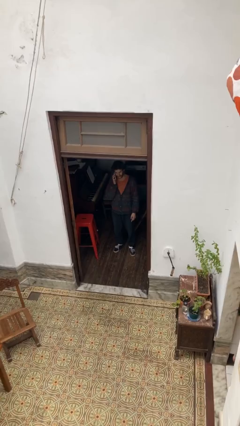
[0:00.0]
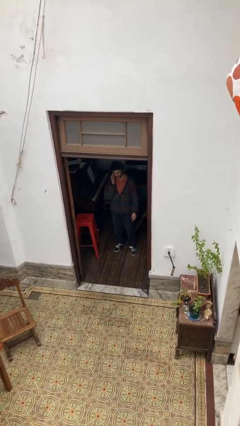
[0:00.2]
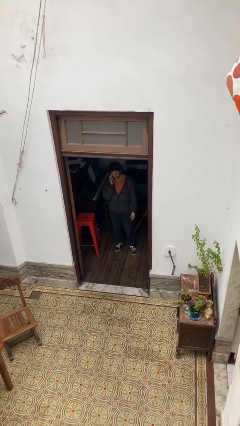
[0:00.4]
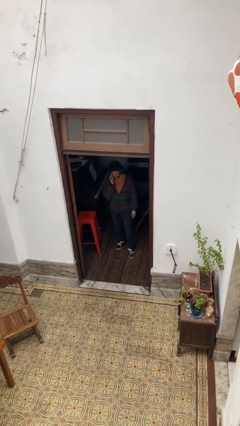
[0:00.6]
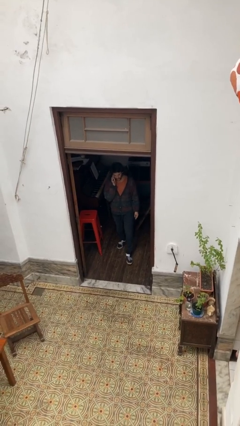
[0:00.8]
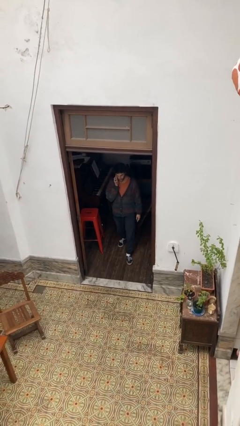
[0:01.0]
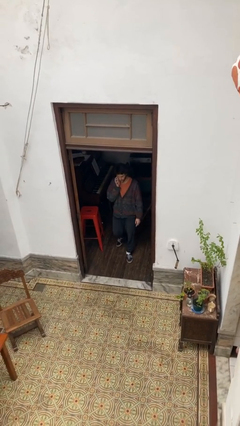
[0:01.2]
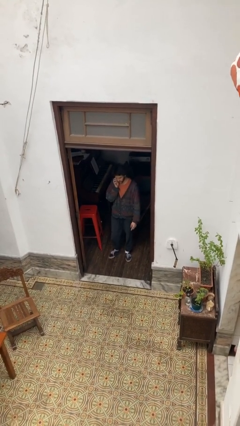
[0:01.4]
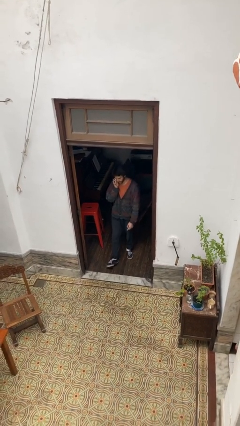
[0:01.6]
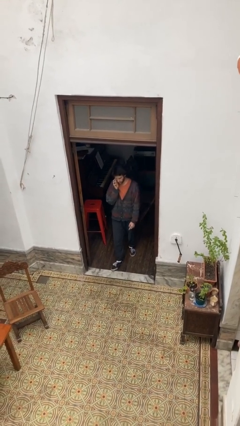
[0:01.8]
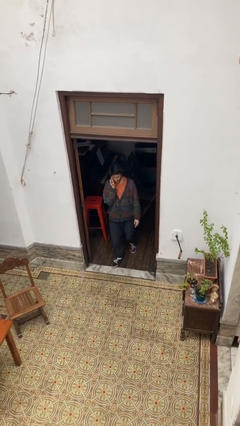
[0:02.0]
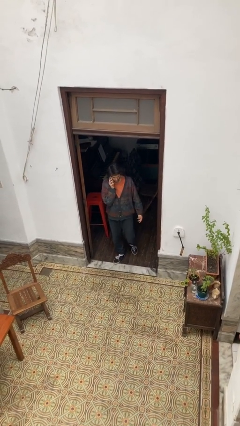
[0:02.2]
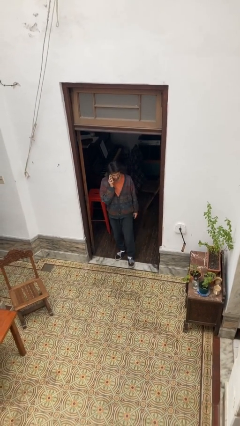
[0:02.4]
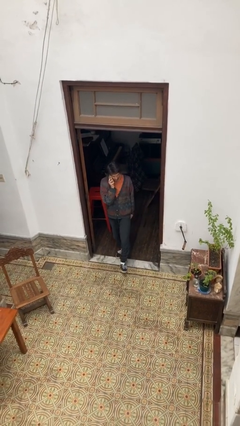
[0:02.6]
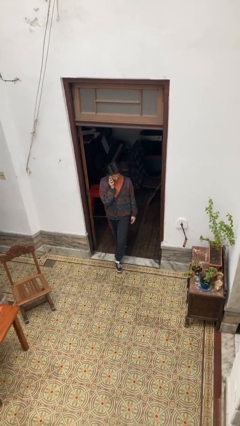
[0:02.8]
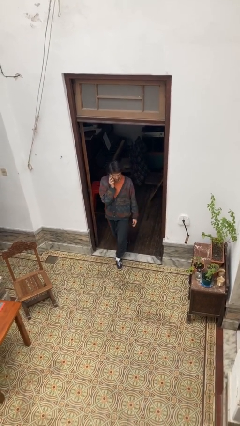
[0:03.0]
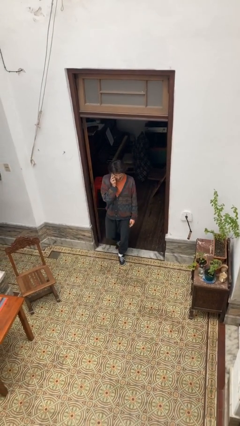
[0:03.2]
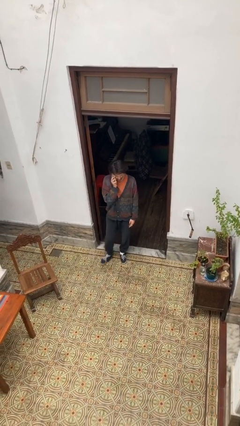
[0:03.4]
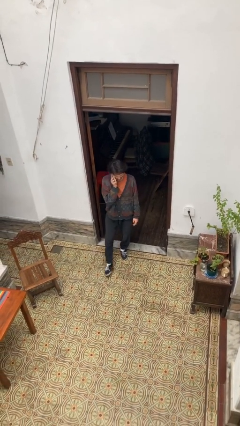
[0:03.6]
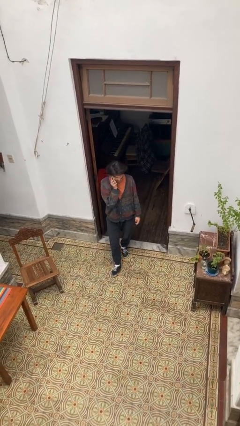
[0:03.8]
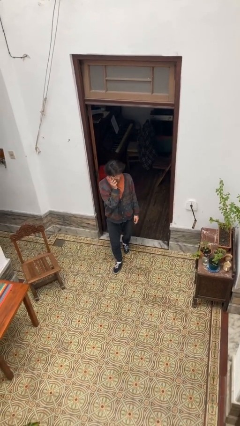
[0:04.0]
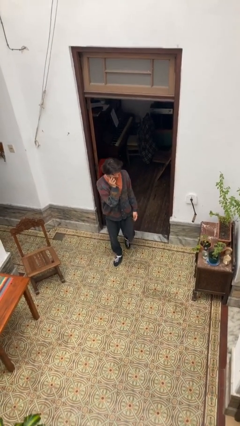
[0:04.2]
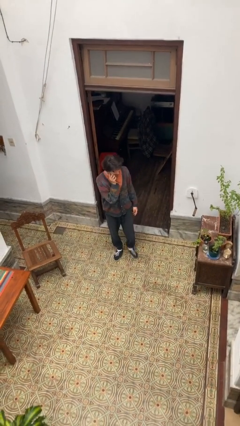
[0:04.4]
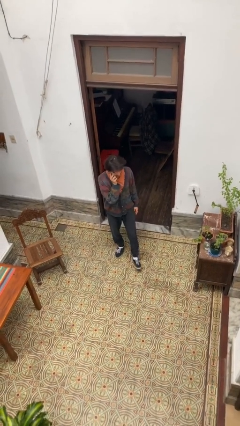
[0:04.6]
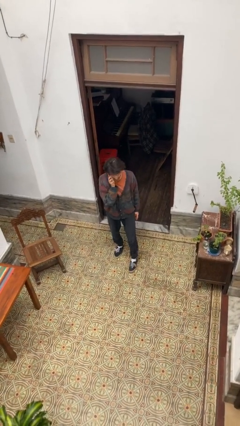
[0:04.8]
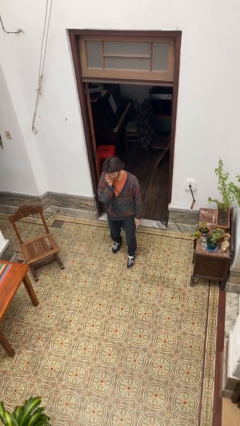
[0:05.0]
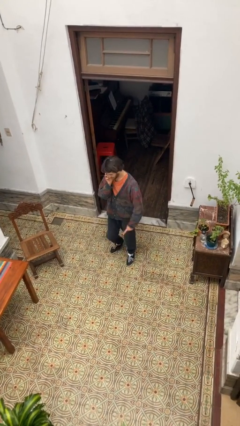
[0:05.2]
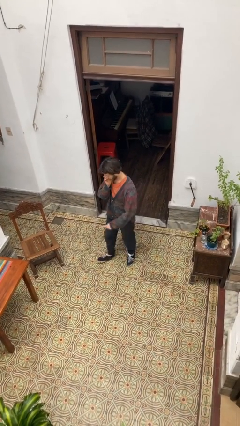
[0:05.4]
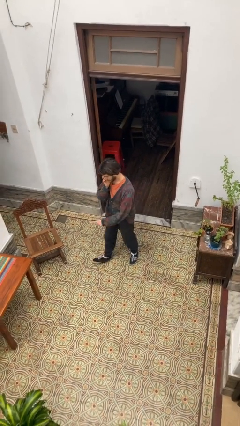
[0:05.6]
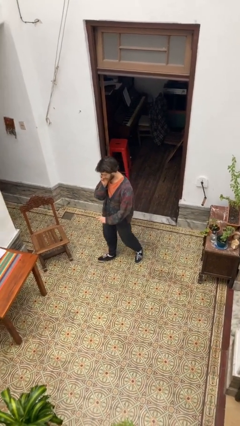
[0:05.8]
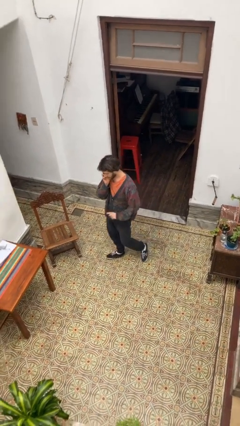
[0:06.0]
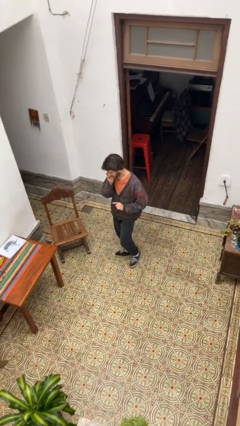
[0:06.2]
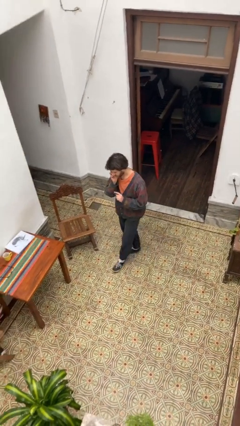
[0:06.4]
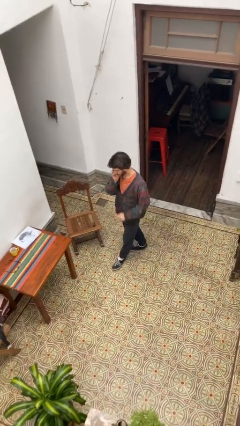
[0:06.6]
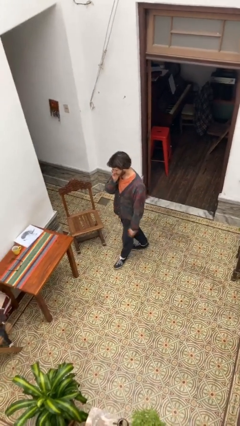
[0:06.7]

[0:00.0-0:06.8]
person enters scene through structure

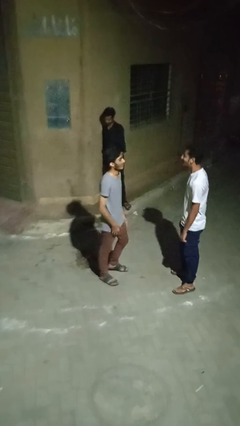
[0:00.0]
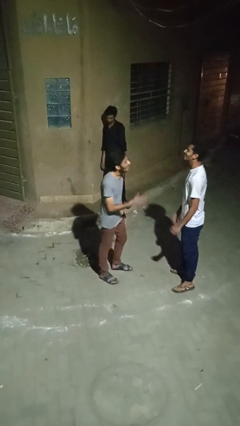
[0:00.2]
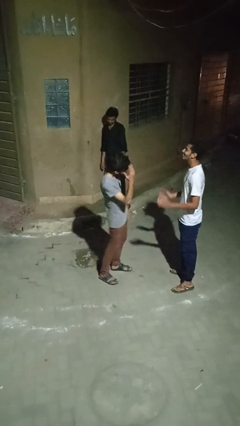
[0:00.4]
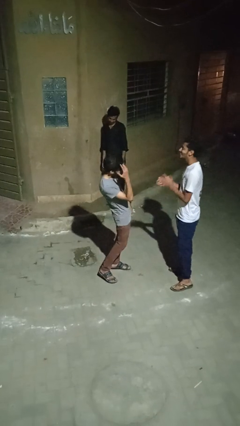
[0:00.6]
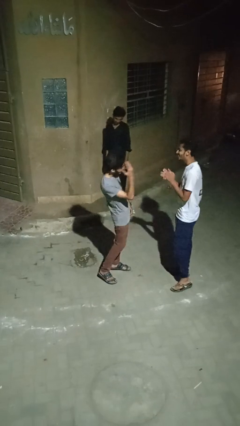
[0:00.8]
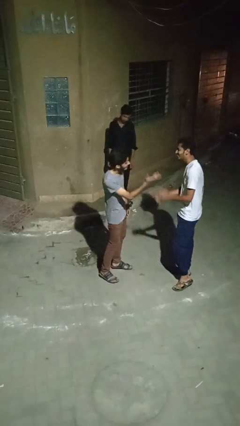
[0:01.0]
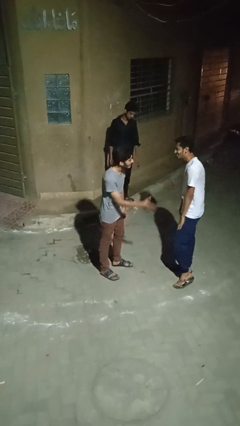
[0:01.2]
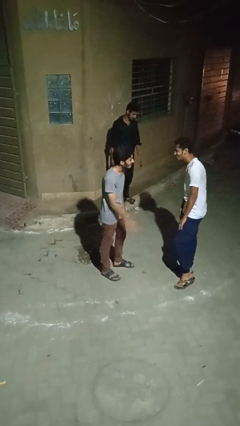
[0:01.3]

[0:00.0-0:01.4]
person laughs with person

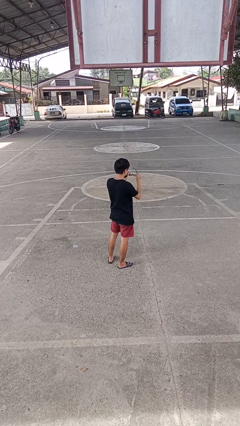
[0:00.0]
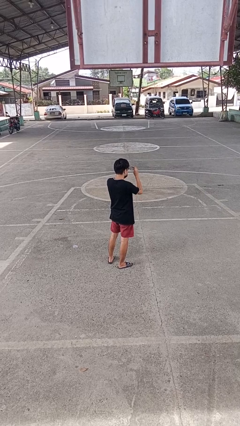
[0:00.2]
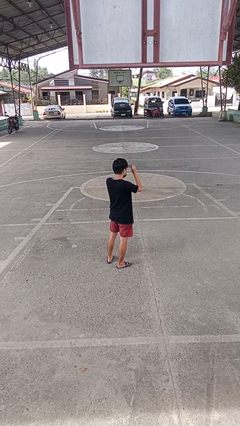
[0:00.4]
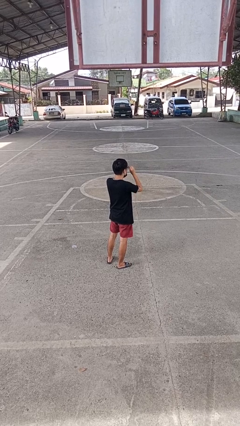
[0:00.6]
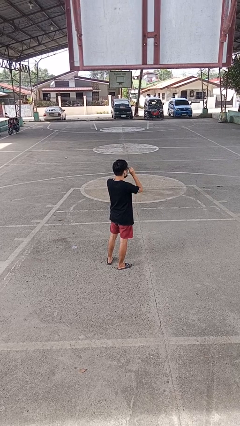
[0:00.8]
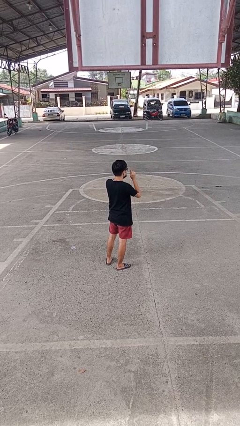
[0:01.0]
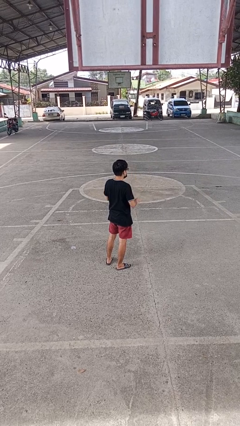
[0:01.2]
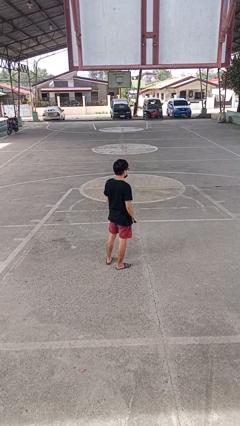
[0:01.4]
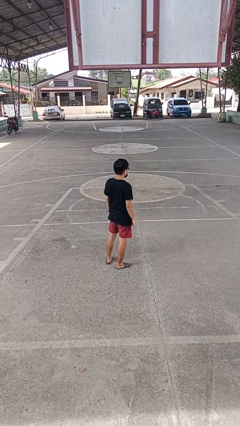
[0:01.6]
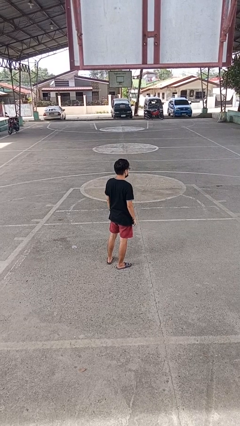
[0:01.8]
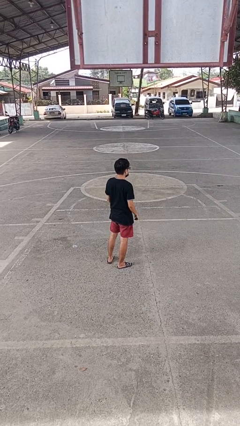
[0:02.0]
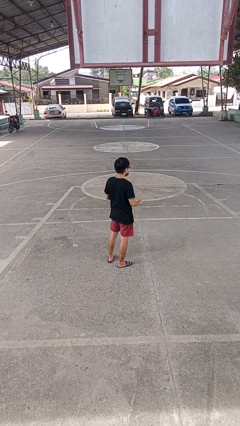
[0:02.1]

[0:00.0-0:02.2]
person puts on glasses

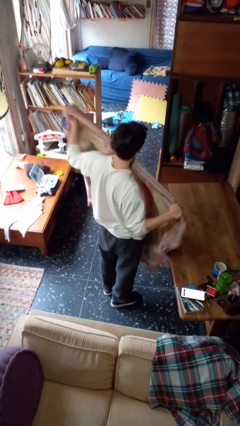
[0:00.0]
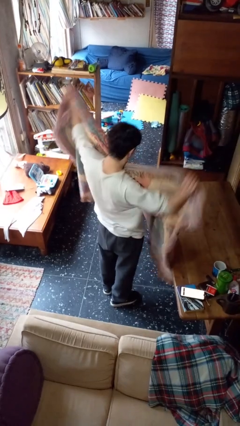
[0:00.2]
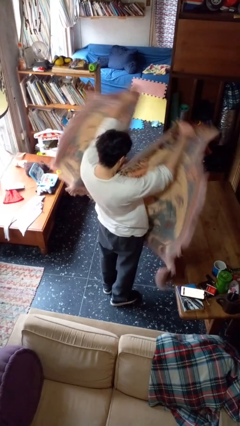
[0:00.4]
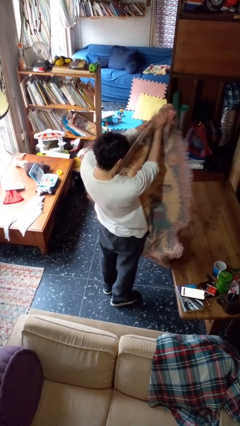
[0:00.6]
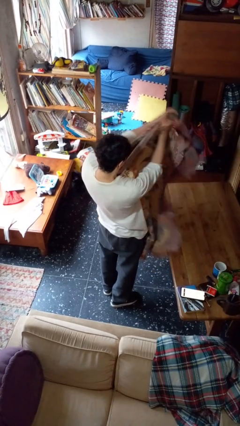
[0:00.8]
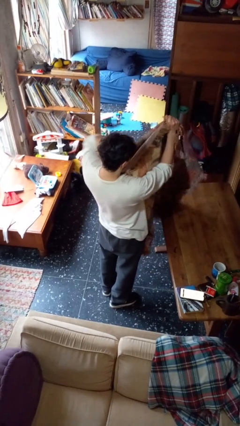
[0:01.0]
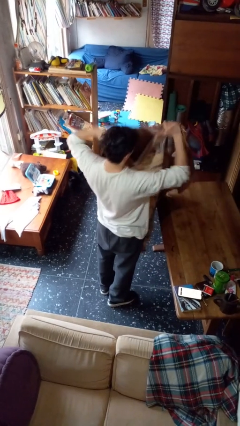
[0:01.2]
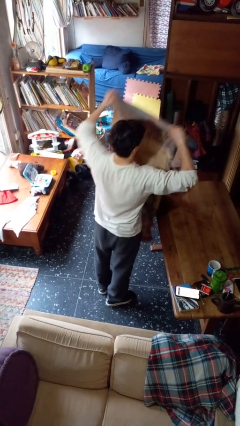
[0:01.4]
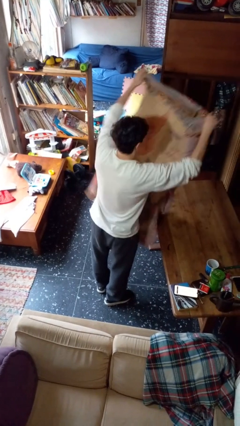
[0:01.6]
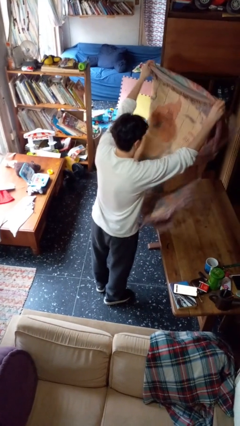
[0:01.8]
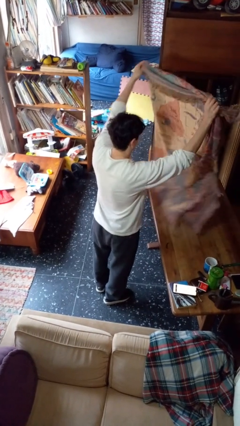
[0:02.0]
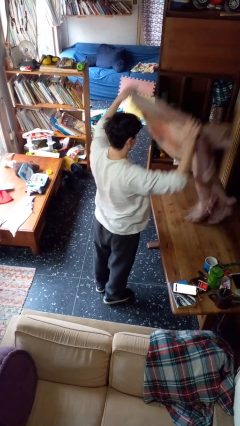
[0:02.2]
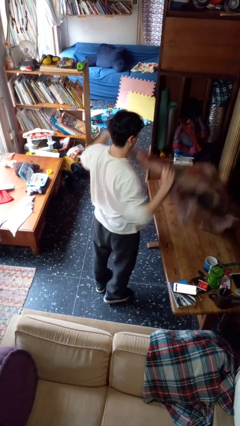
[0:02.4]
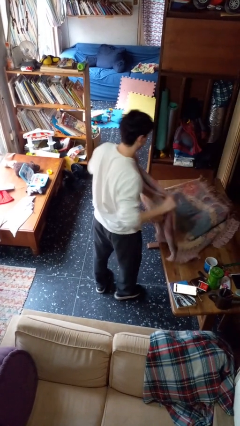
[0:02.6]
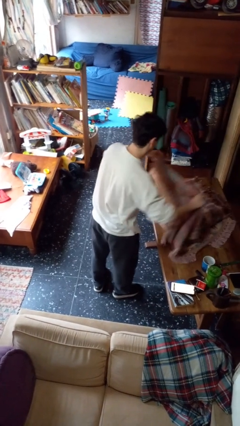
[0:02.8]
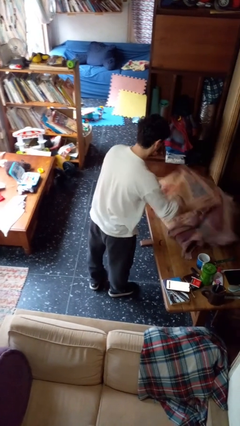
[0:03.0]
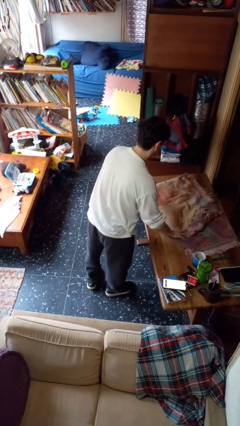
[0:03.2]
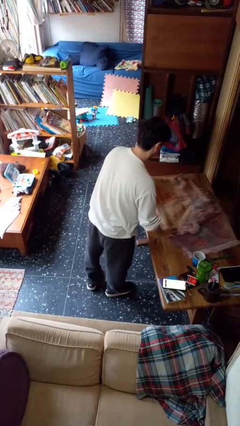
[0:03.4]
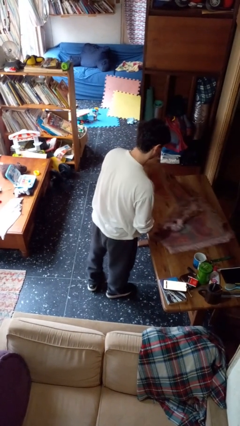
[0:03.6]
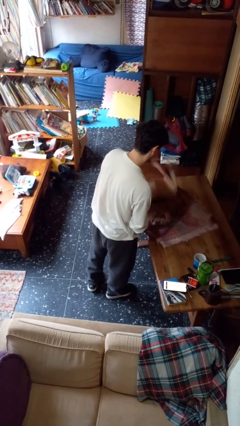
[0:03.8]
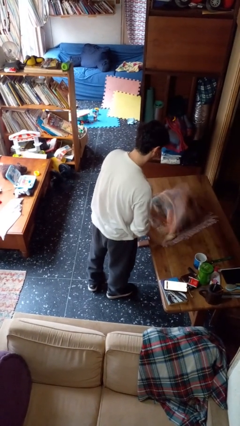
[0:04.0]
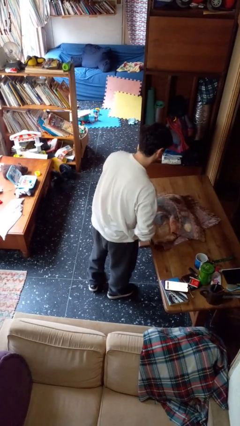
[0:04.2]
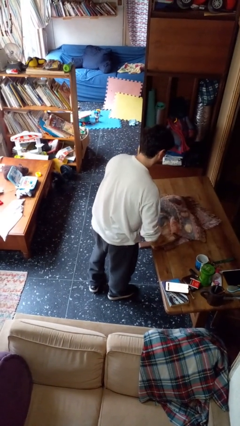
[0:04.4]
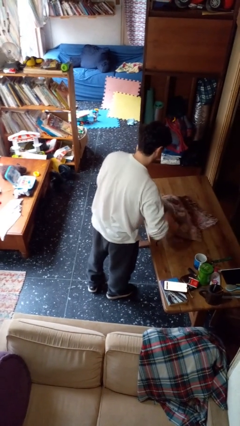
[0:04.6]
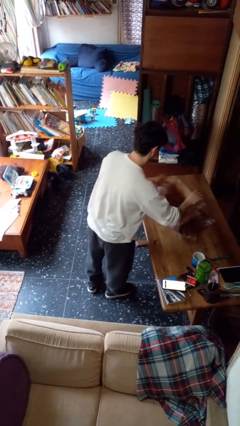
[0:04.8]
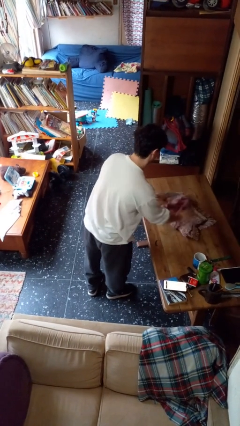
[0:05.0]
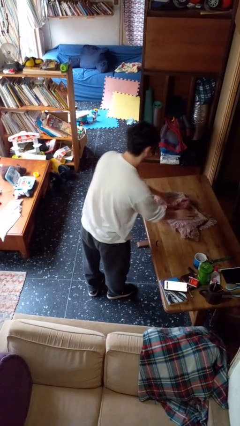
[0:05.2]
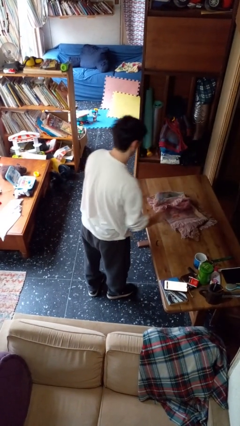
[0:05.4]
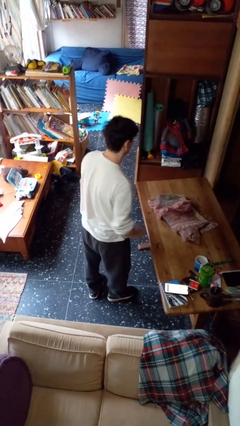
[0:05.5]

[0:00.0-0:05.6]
person folds blanket

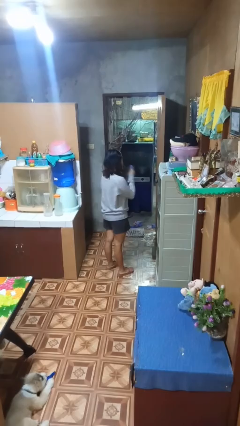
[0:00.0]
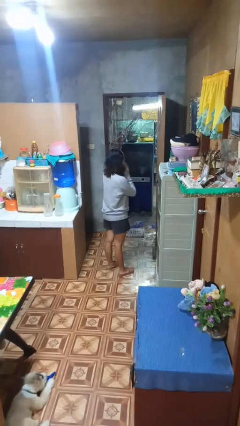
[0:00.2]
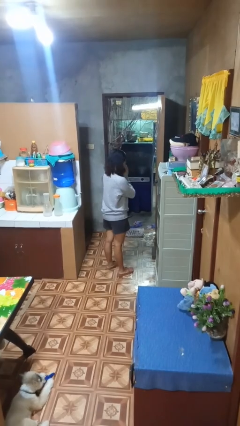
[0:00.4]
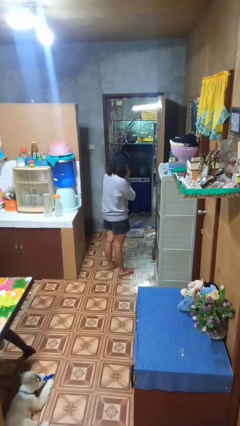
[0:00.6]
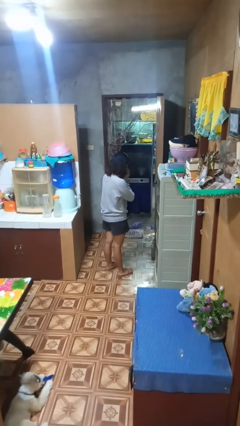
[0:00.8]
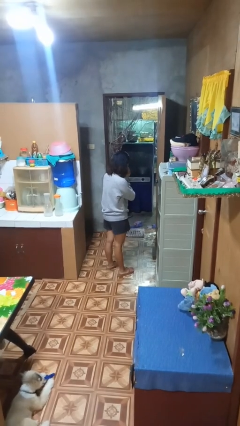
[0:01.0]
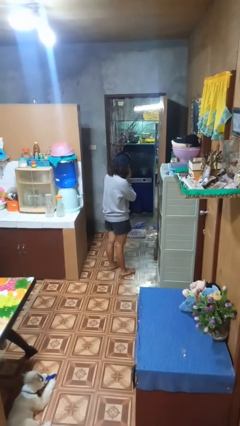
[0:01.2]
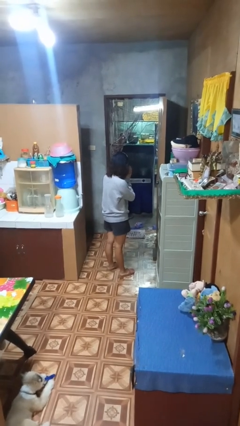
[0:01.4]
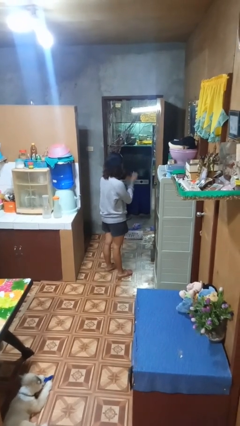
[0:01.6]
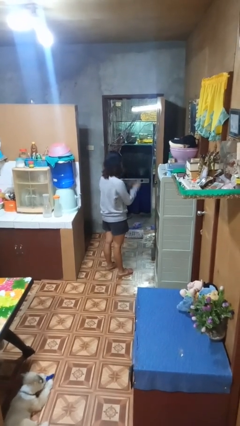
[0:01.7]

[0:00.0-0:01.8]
person blows nose
